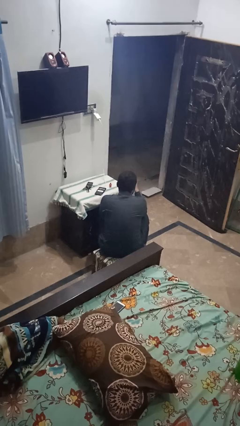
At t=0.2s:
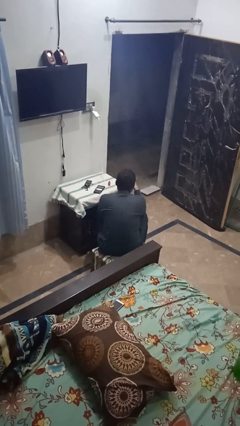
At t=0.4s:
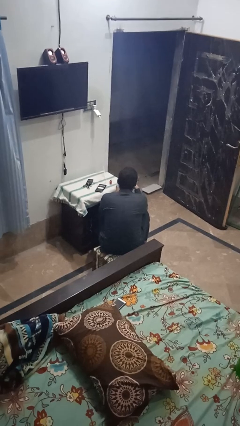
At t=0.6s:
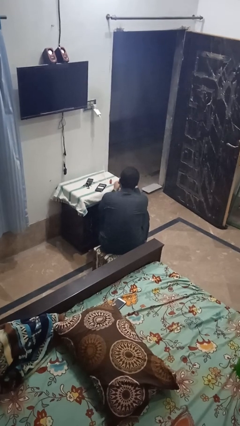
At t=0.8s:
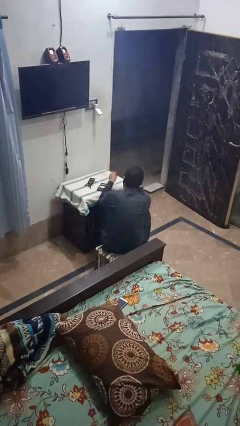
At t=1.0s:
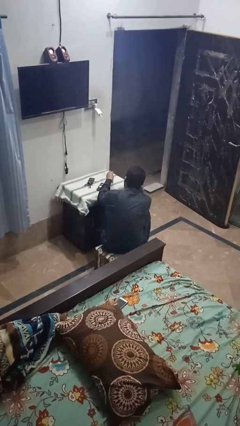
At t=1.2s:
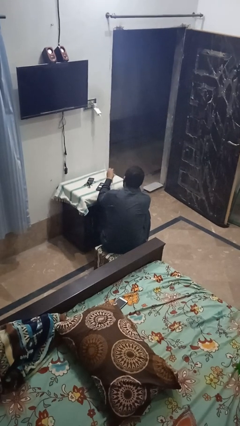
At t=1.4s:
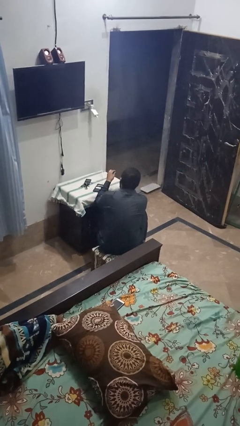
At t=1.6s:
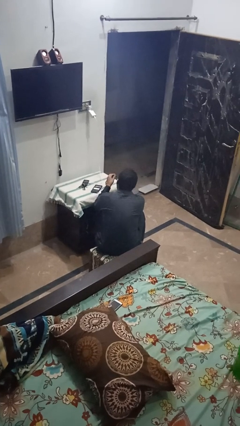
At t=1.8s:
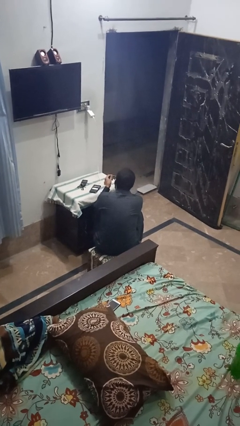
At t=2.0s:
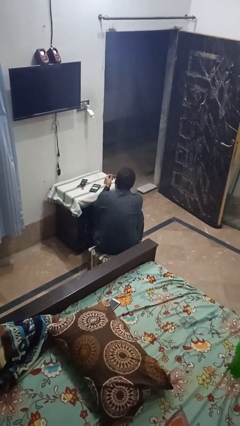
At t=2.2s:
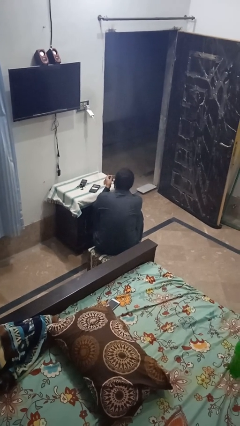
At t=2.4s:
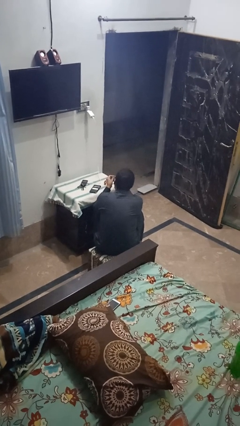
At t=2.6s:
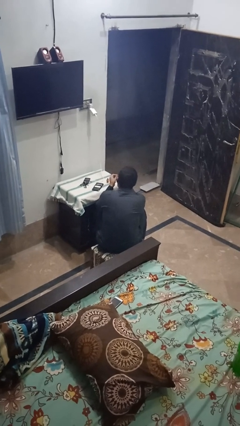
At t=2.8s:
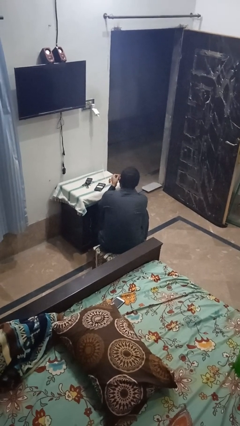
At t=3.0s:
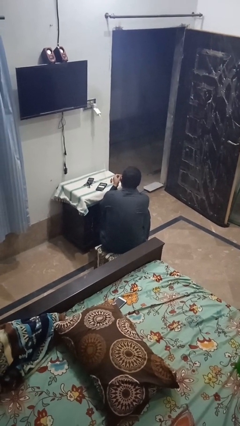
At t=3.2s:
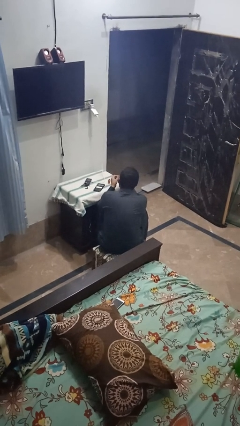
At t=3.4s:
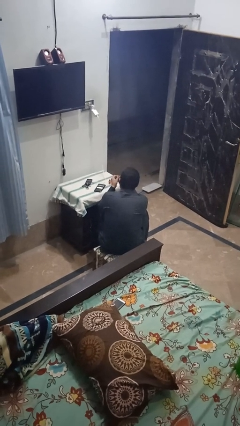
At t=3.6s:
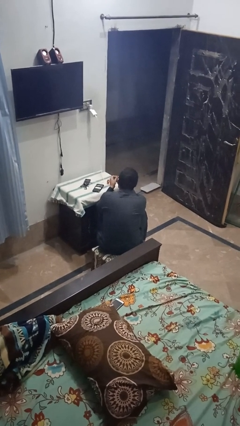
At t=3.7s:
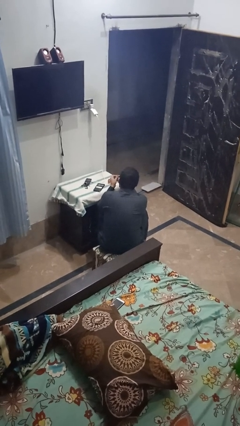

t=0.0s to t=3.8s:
person paints fingernails

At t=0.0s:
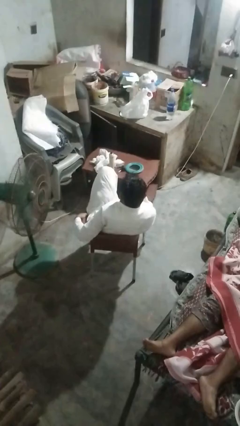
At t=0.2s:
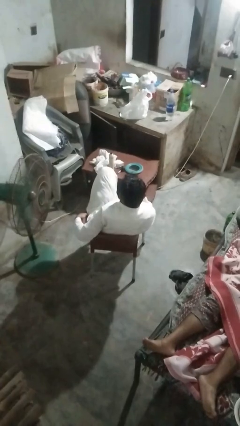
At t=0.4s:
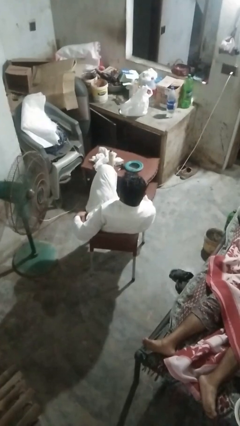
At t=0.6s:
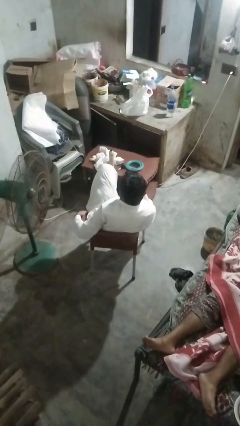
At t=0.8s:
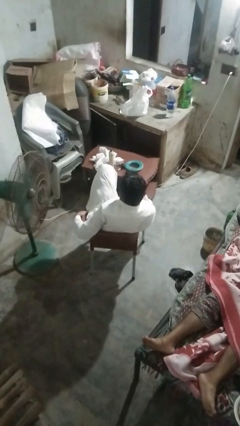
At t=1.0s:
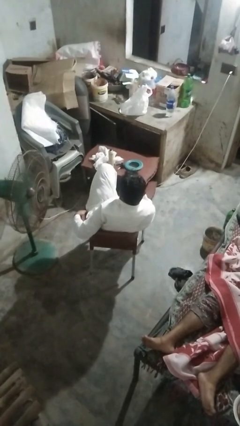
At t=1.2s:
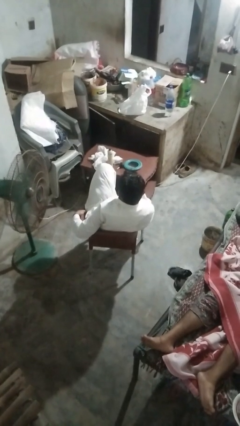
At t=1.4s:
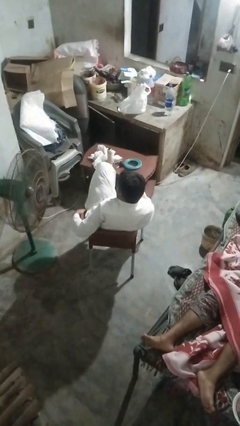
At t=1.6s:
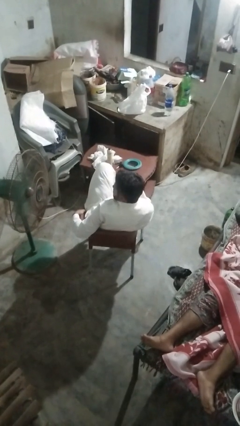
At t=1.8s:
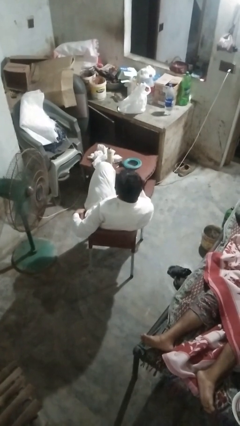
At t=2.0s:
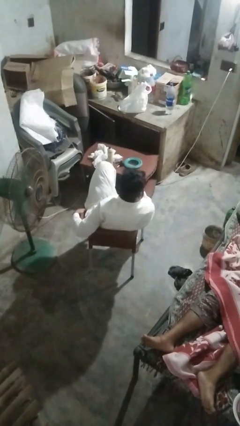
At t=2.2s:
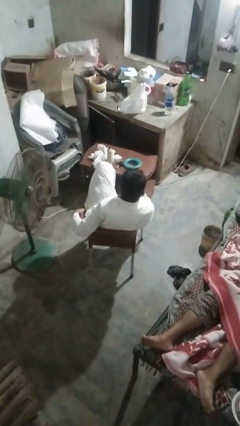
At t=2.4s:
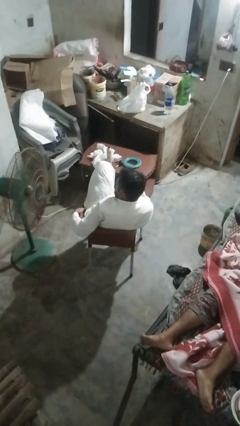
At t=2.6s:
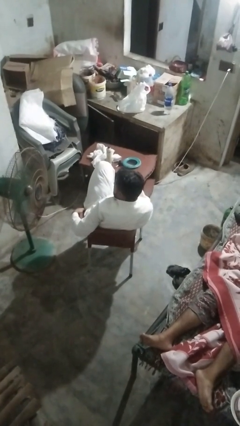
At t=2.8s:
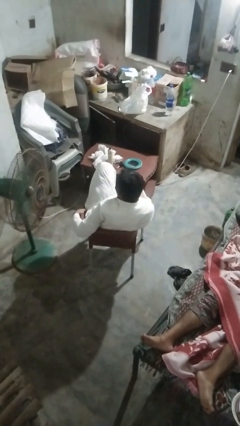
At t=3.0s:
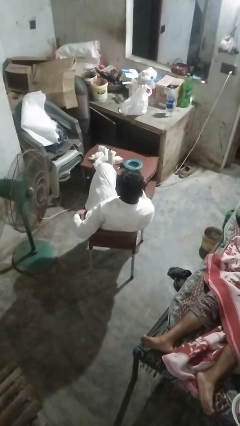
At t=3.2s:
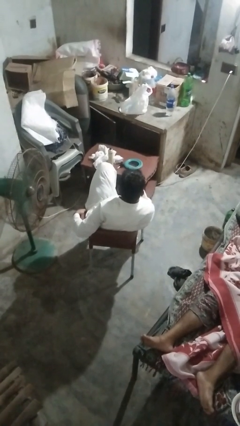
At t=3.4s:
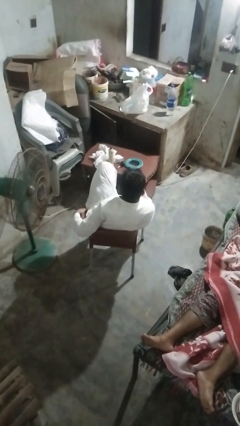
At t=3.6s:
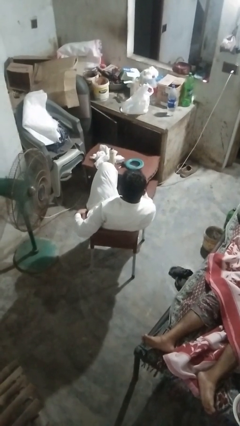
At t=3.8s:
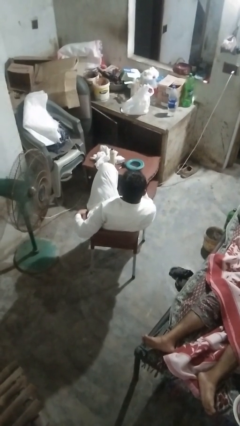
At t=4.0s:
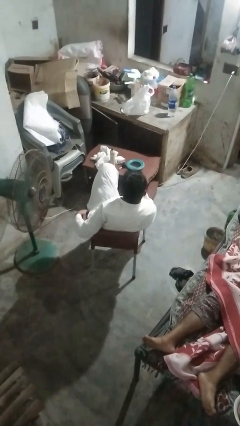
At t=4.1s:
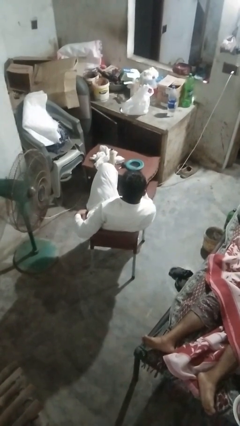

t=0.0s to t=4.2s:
person shakes head

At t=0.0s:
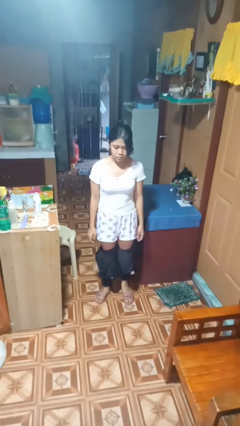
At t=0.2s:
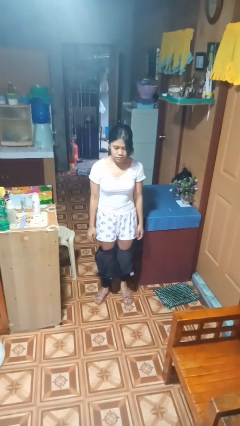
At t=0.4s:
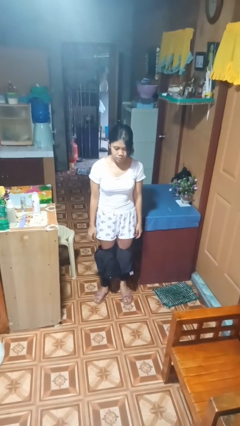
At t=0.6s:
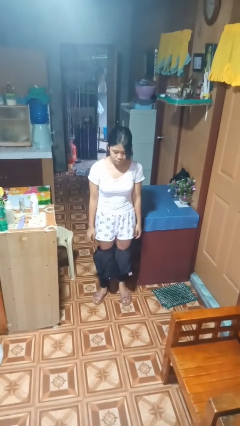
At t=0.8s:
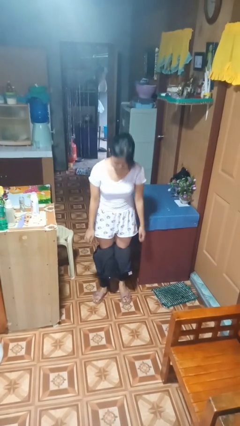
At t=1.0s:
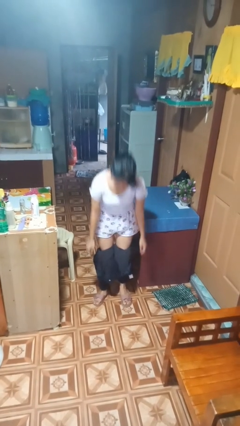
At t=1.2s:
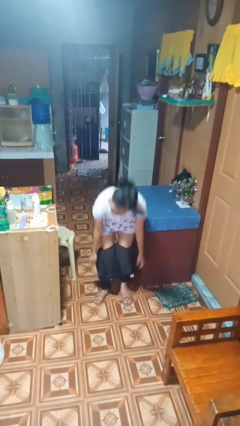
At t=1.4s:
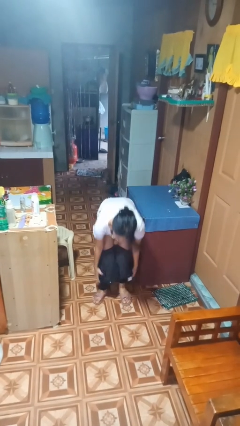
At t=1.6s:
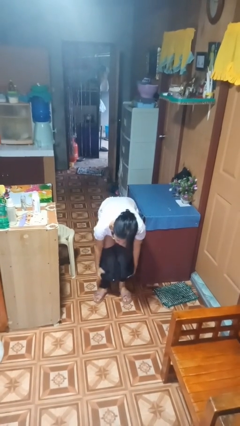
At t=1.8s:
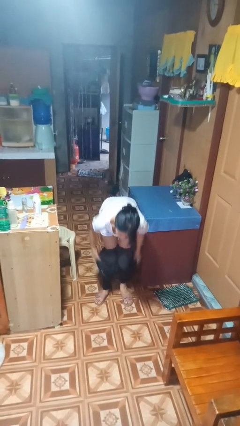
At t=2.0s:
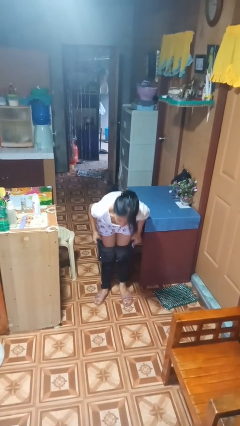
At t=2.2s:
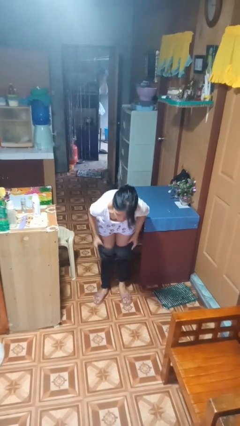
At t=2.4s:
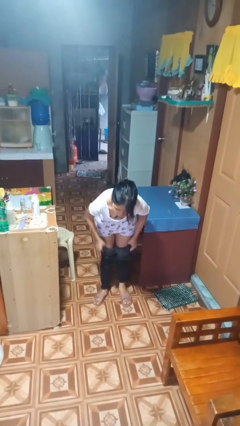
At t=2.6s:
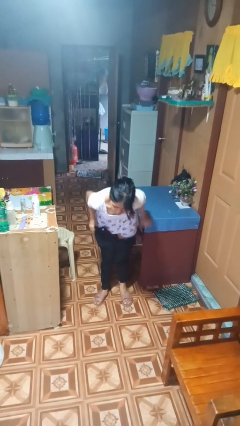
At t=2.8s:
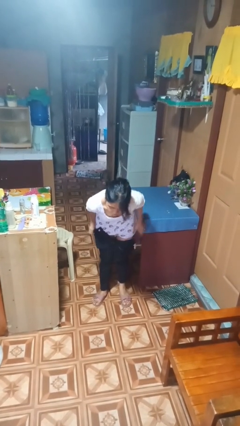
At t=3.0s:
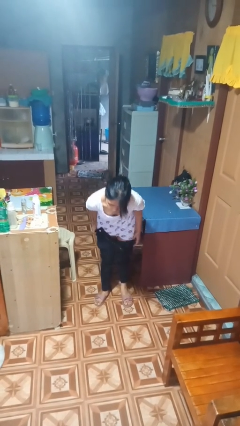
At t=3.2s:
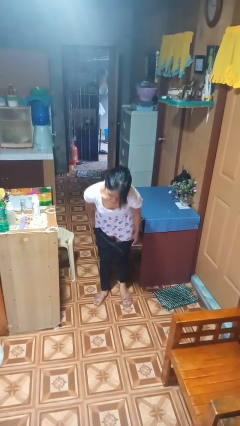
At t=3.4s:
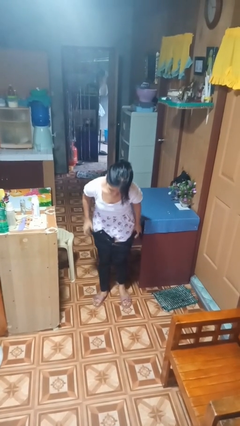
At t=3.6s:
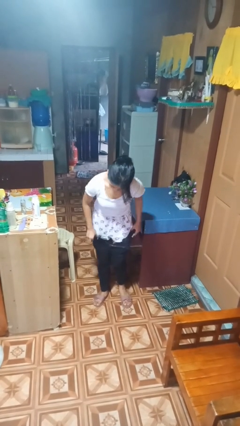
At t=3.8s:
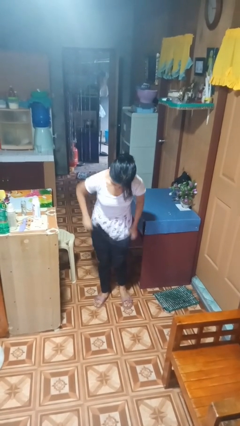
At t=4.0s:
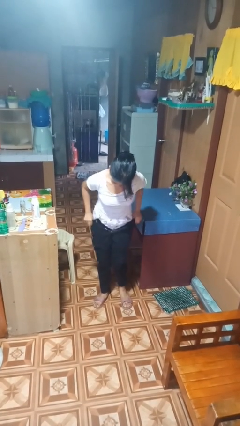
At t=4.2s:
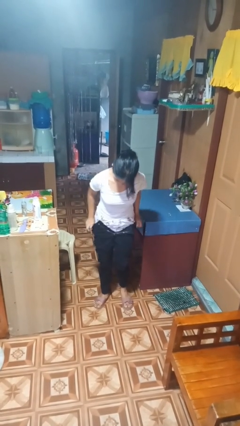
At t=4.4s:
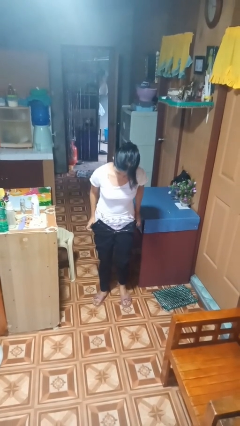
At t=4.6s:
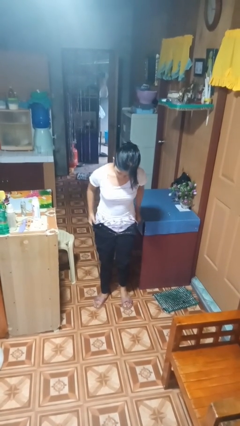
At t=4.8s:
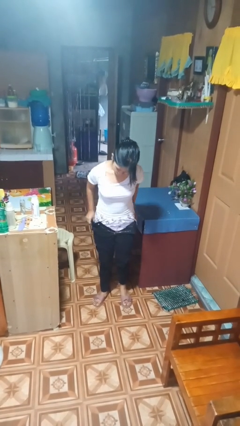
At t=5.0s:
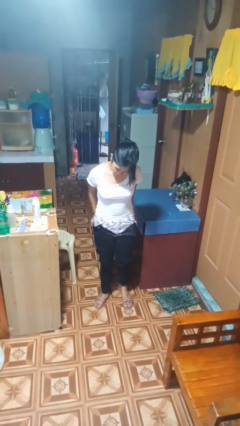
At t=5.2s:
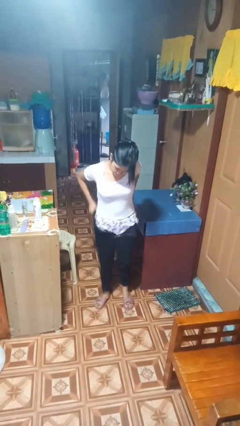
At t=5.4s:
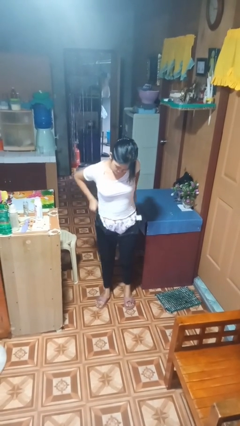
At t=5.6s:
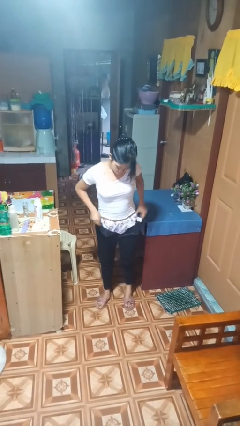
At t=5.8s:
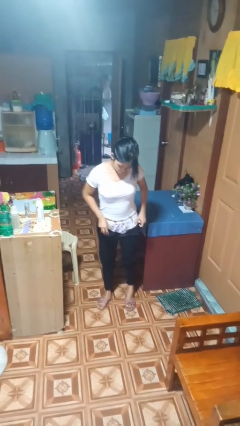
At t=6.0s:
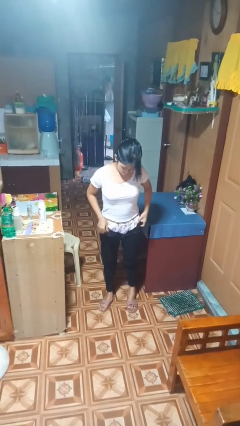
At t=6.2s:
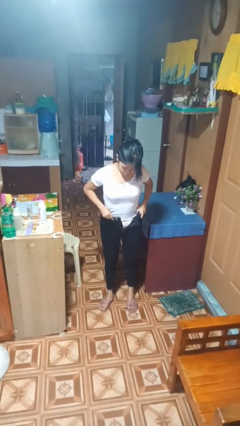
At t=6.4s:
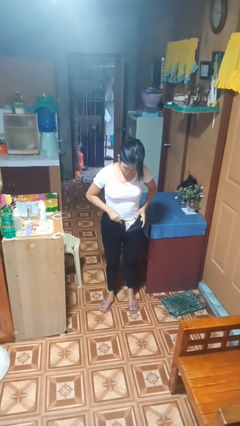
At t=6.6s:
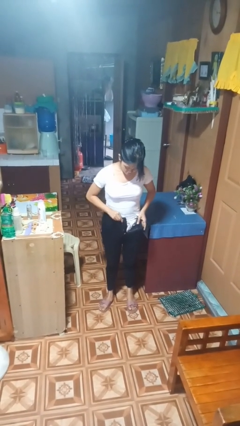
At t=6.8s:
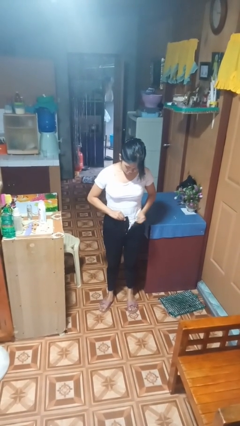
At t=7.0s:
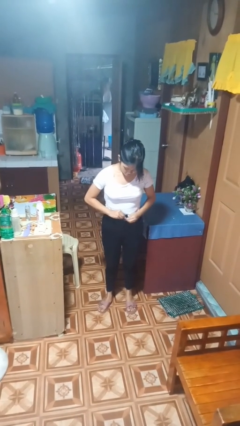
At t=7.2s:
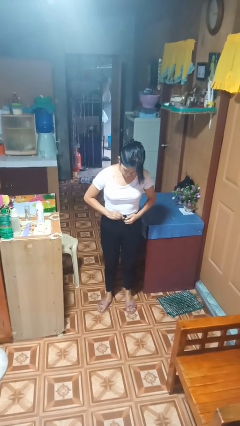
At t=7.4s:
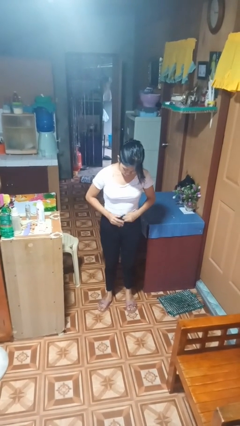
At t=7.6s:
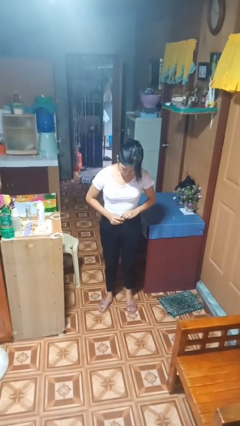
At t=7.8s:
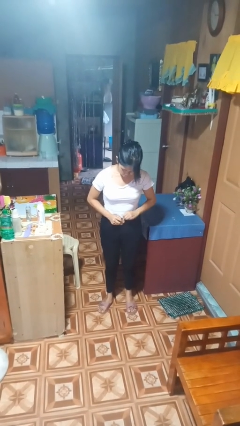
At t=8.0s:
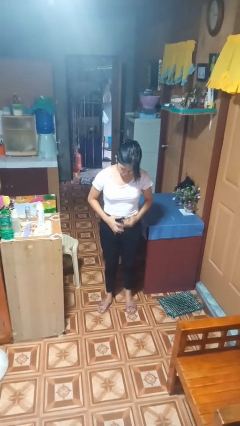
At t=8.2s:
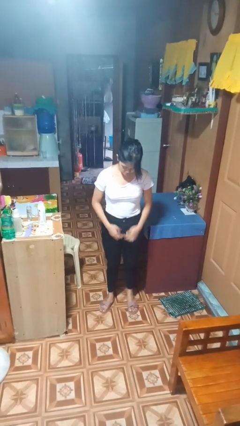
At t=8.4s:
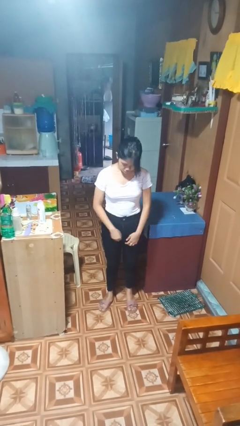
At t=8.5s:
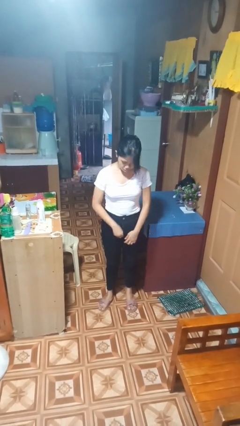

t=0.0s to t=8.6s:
person puts on pants

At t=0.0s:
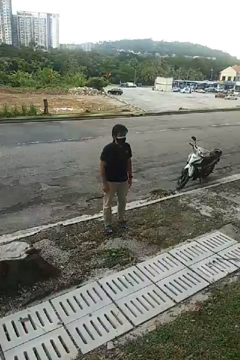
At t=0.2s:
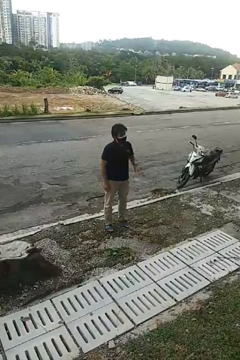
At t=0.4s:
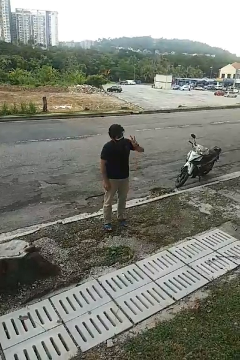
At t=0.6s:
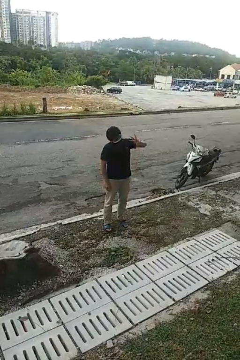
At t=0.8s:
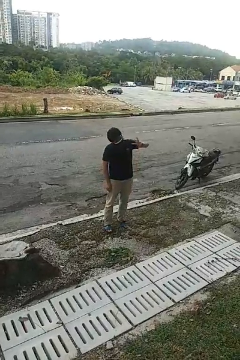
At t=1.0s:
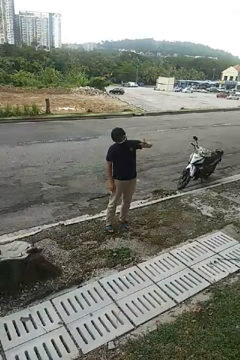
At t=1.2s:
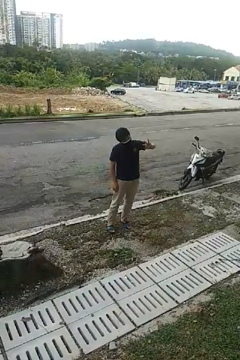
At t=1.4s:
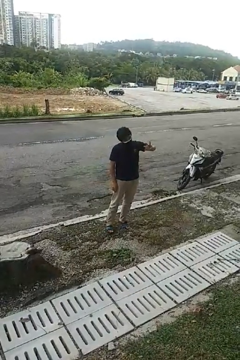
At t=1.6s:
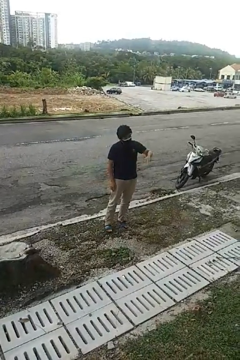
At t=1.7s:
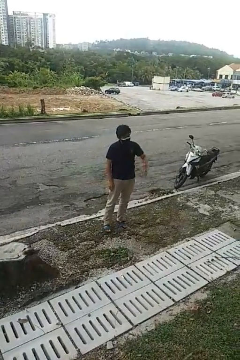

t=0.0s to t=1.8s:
person gestures number three
